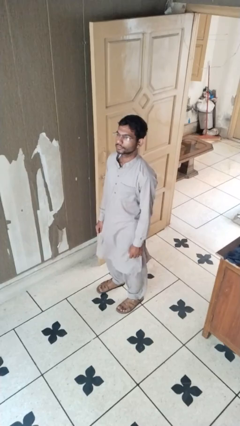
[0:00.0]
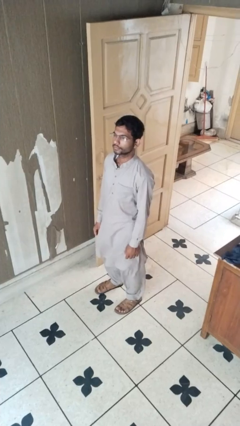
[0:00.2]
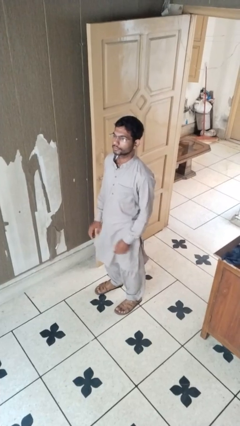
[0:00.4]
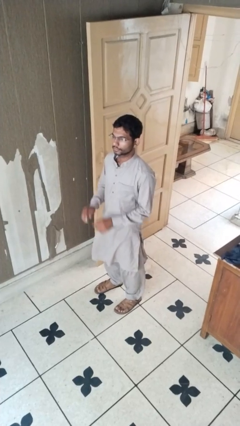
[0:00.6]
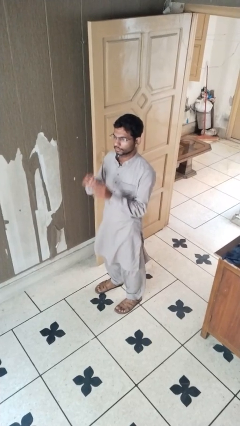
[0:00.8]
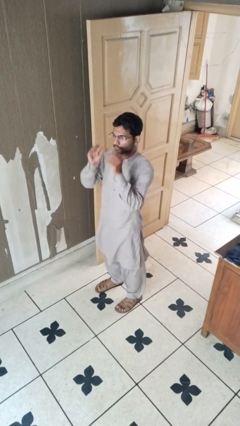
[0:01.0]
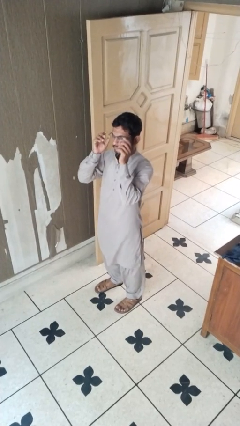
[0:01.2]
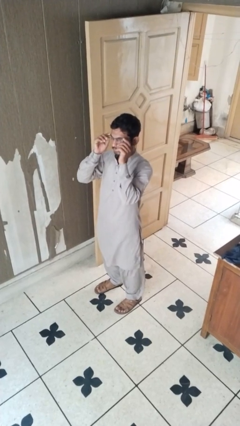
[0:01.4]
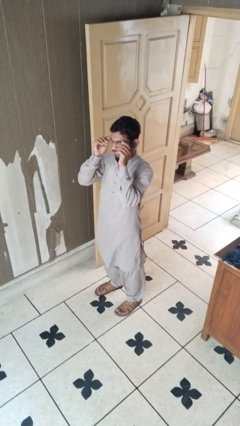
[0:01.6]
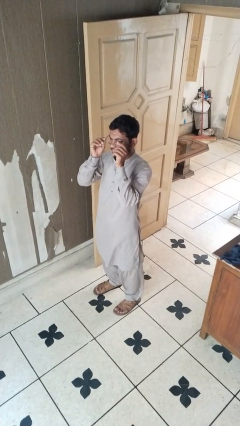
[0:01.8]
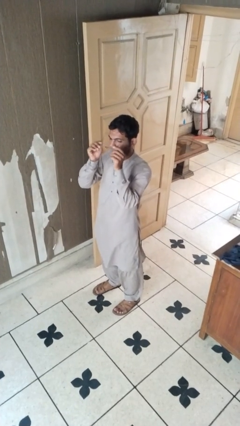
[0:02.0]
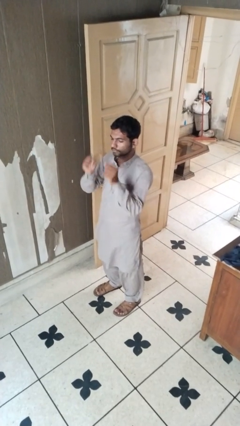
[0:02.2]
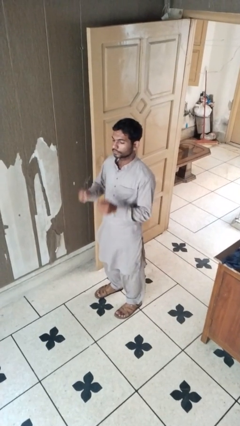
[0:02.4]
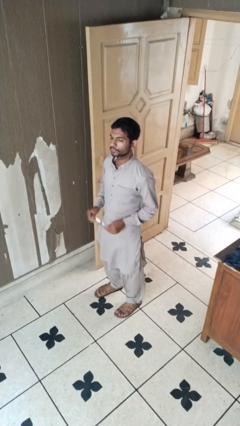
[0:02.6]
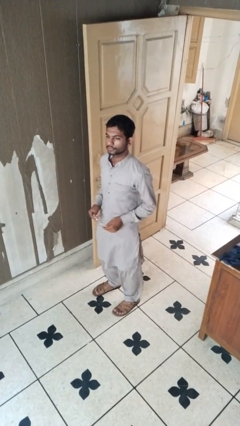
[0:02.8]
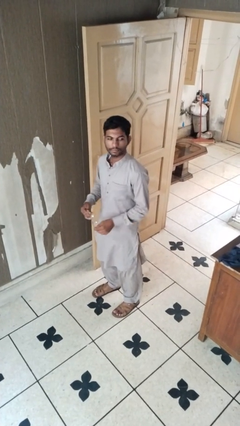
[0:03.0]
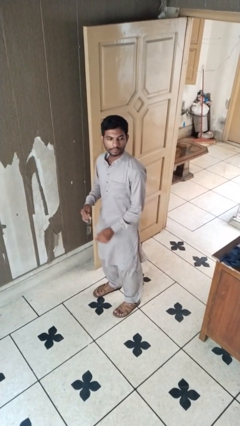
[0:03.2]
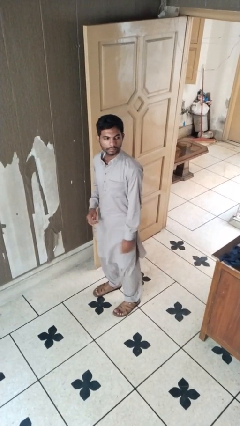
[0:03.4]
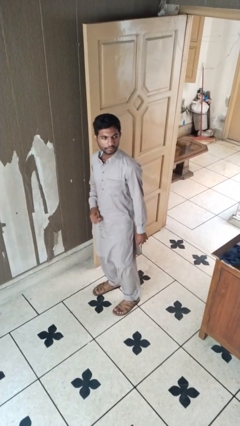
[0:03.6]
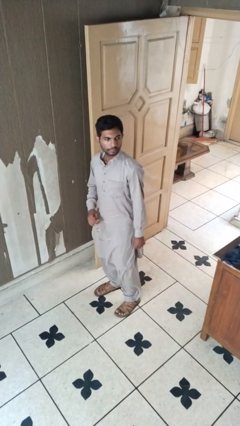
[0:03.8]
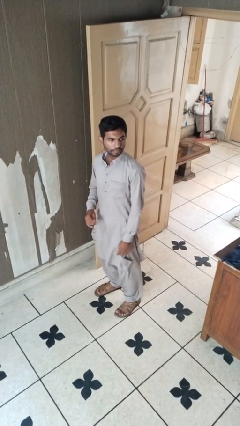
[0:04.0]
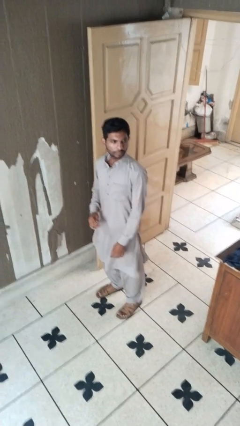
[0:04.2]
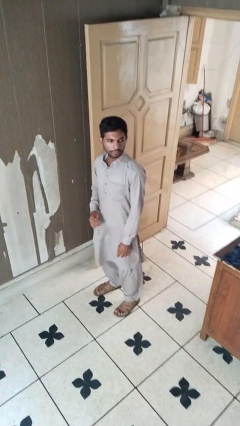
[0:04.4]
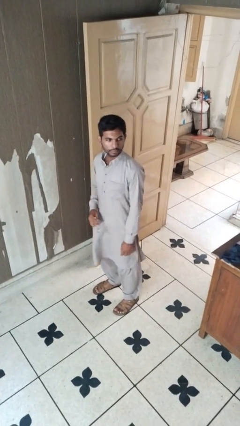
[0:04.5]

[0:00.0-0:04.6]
person takes off glasses

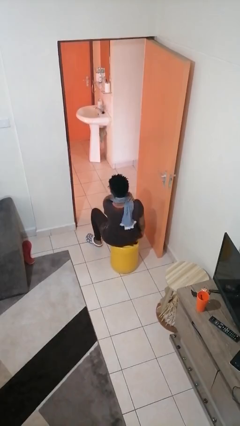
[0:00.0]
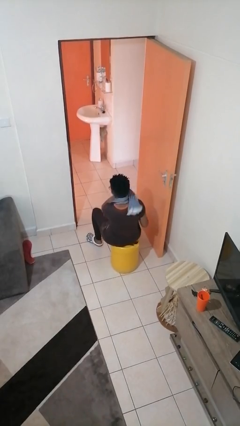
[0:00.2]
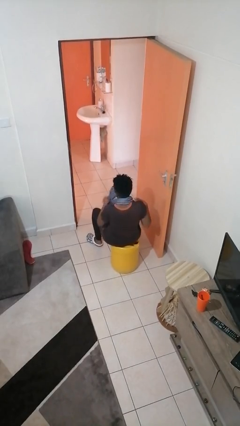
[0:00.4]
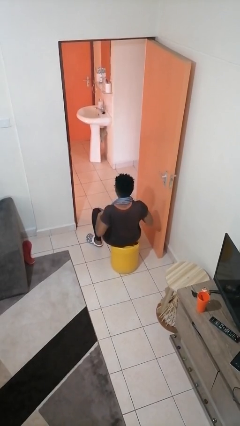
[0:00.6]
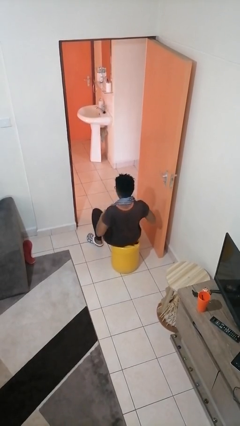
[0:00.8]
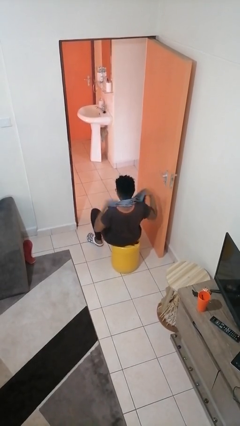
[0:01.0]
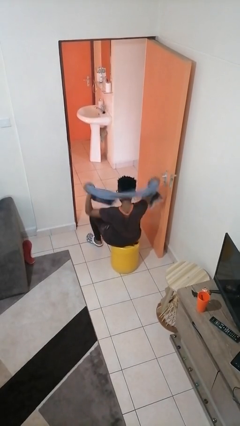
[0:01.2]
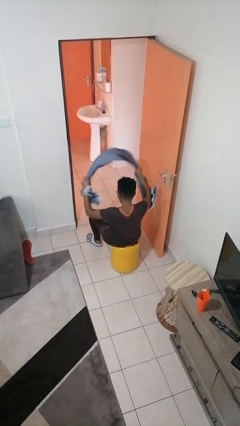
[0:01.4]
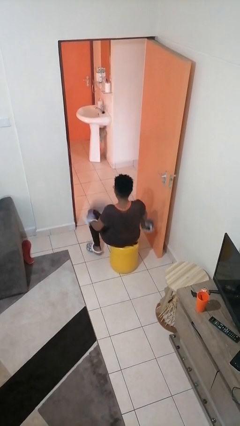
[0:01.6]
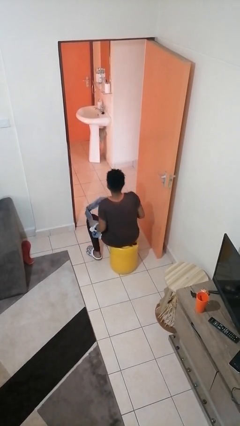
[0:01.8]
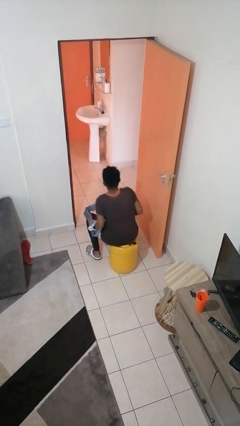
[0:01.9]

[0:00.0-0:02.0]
person takes off scarf

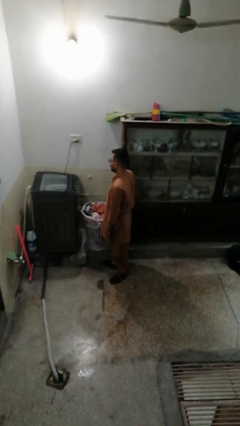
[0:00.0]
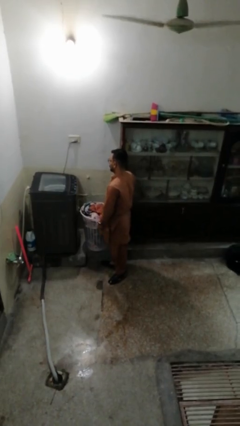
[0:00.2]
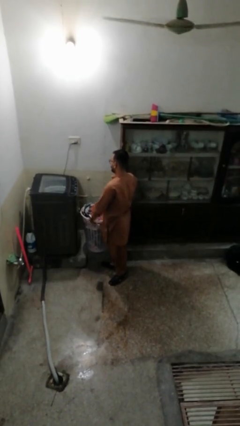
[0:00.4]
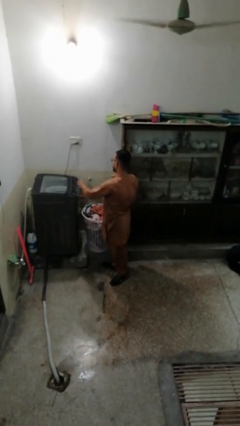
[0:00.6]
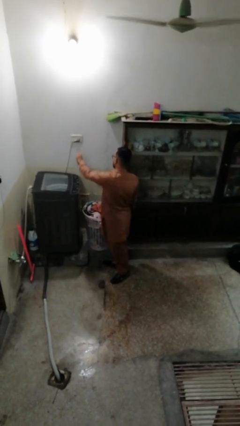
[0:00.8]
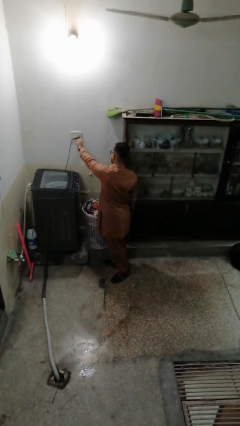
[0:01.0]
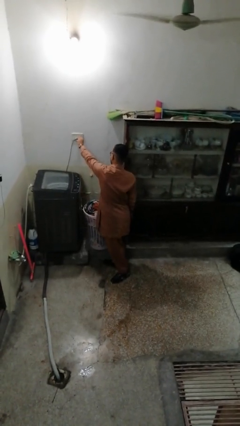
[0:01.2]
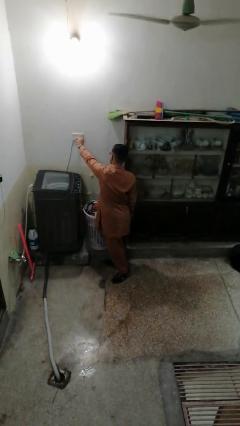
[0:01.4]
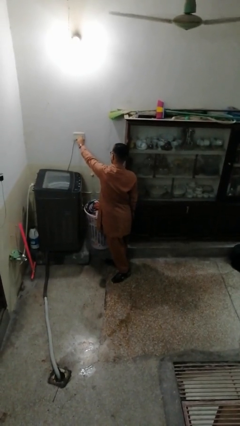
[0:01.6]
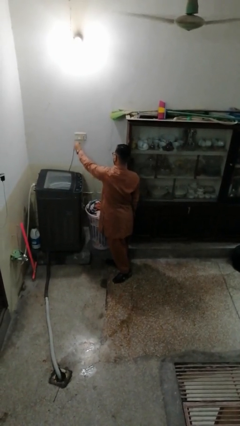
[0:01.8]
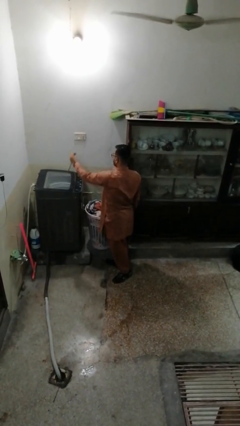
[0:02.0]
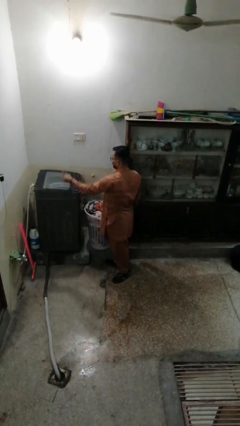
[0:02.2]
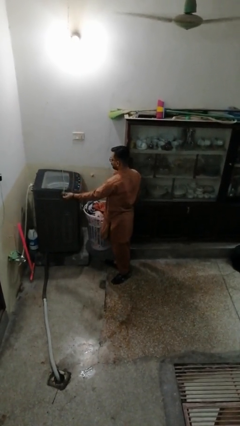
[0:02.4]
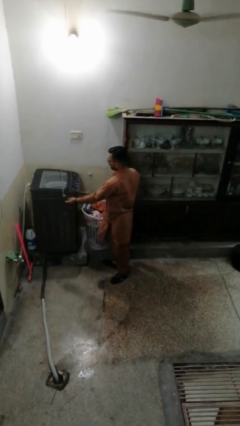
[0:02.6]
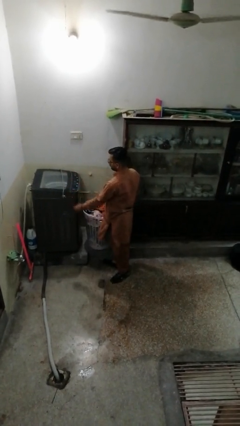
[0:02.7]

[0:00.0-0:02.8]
person unplugs from electrical socket

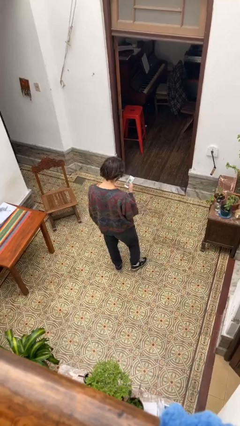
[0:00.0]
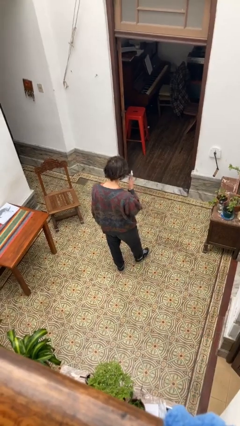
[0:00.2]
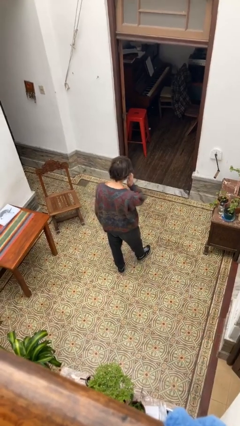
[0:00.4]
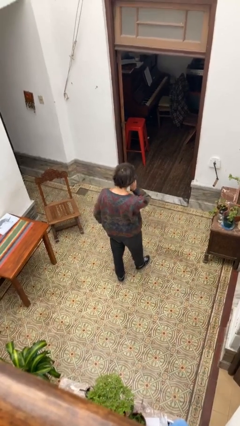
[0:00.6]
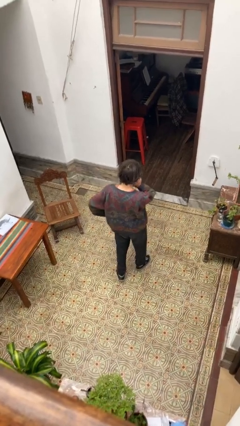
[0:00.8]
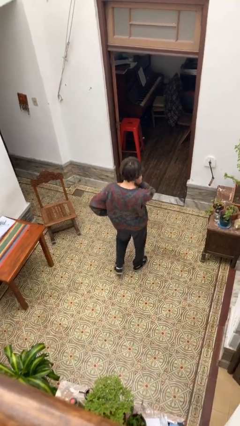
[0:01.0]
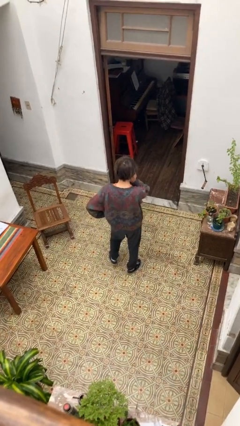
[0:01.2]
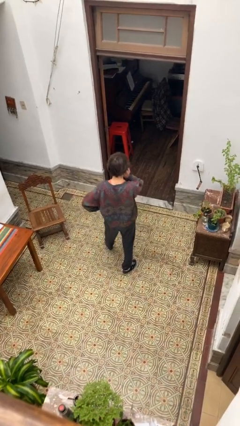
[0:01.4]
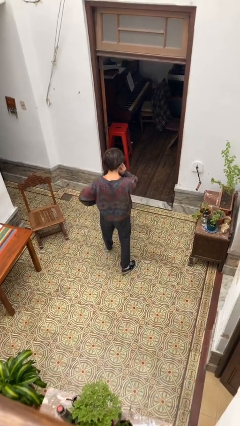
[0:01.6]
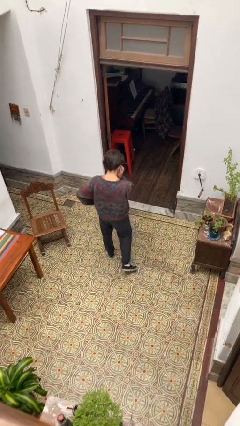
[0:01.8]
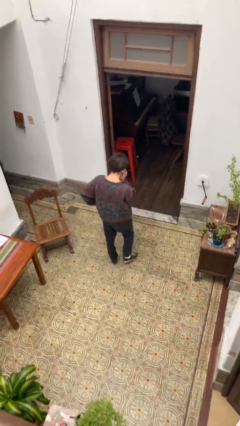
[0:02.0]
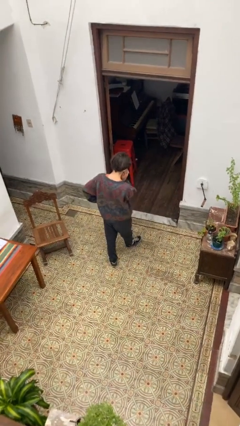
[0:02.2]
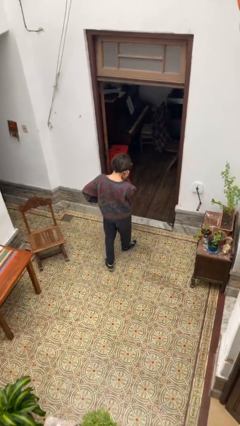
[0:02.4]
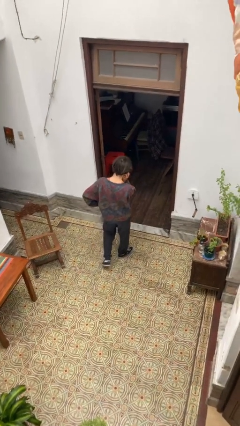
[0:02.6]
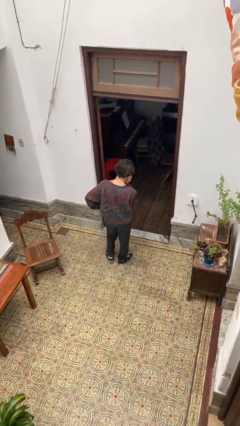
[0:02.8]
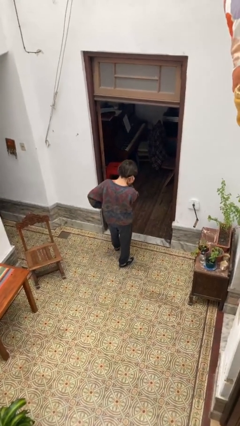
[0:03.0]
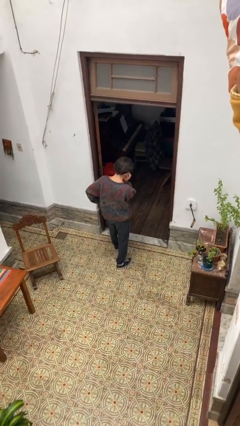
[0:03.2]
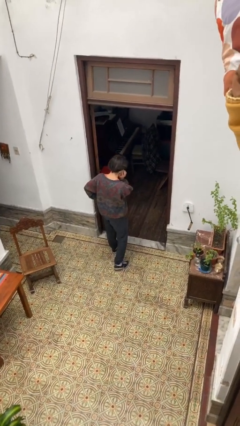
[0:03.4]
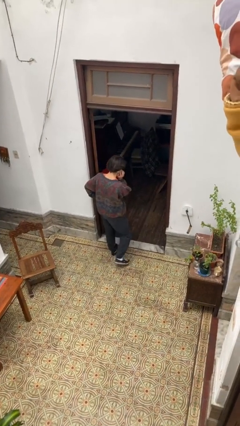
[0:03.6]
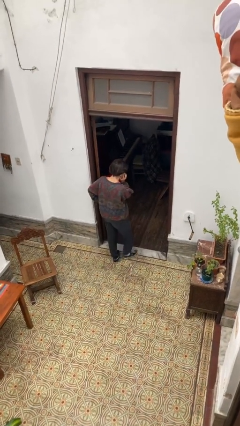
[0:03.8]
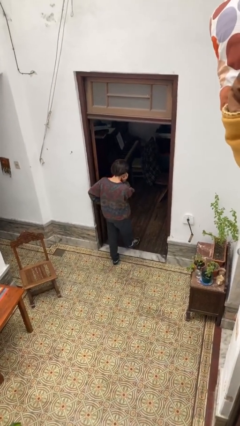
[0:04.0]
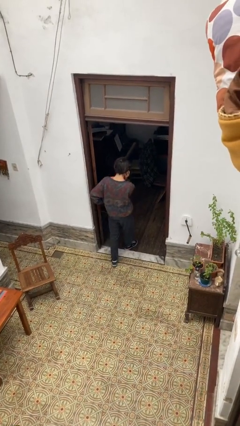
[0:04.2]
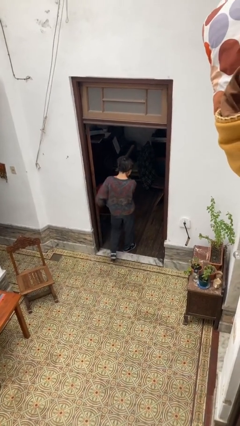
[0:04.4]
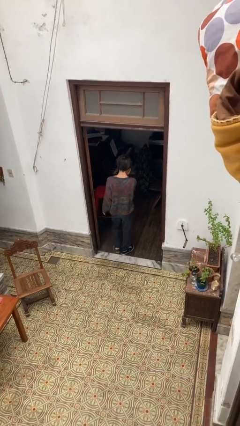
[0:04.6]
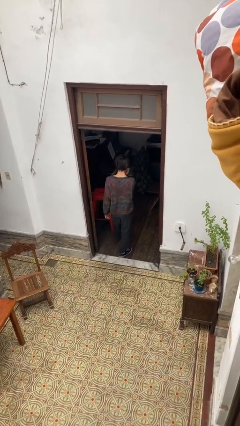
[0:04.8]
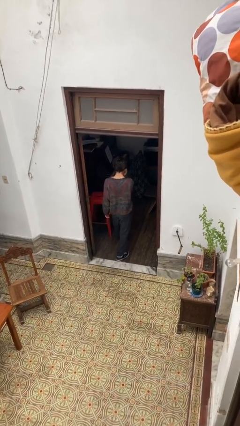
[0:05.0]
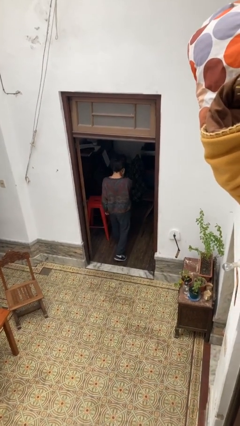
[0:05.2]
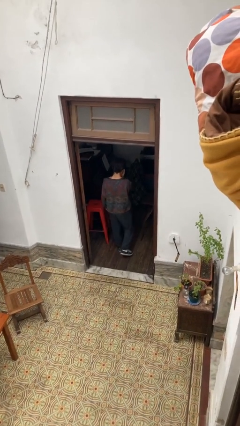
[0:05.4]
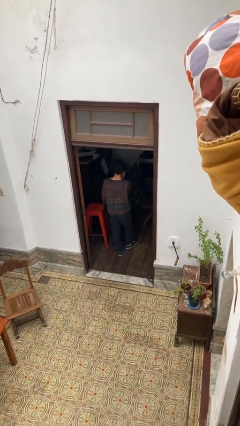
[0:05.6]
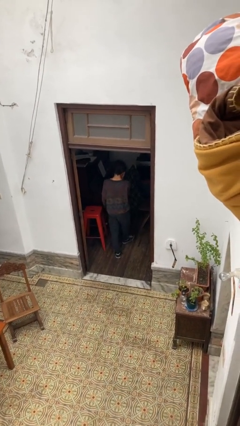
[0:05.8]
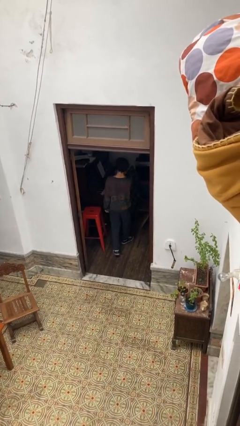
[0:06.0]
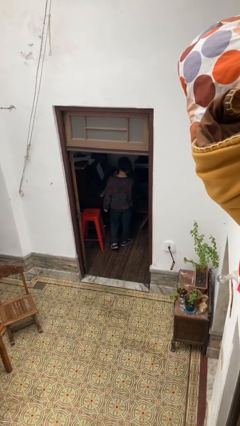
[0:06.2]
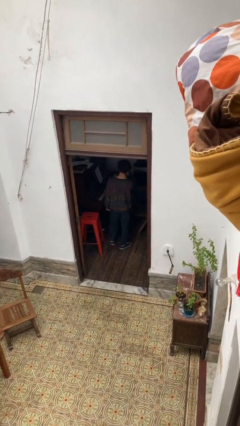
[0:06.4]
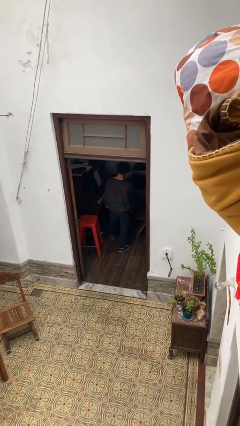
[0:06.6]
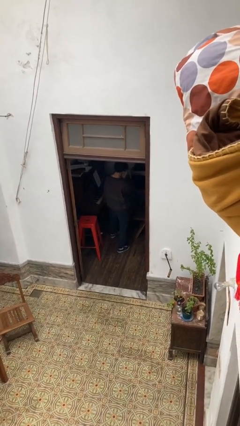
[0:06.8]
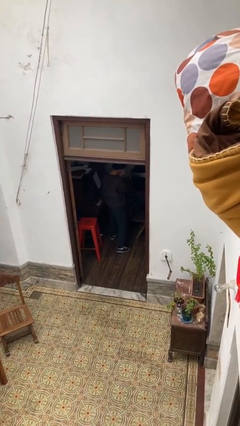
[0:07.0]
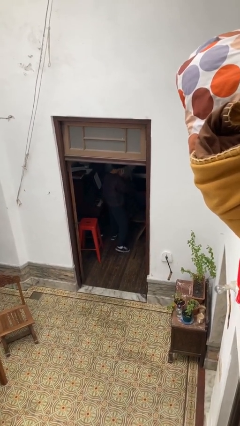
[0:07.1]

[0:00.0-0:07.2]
person exits scene through structure

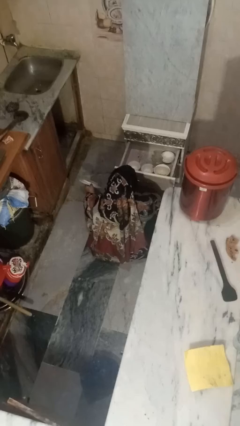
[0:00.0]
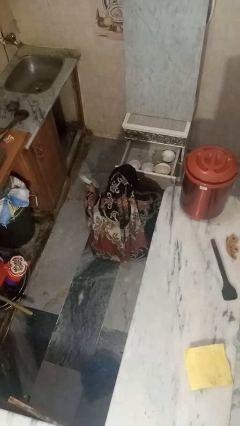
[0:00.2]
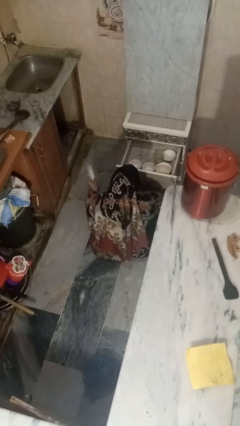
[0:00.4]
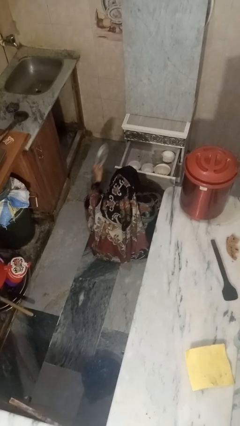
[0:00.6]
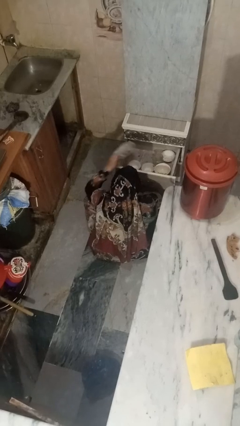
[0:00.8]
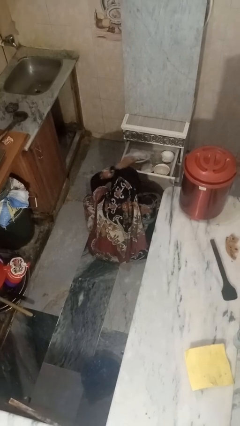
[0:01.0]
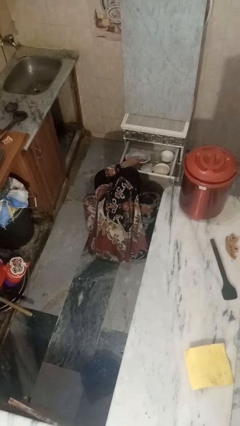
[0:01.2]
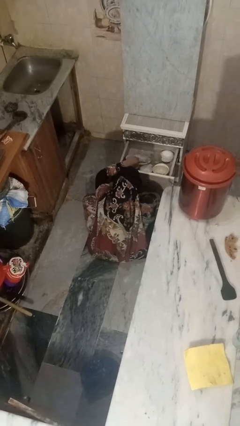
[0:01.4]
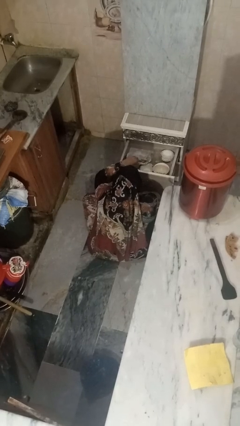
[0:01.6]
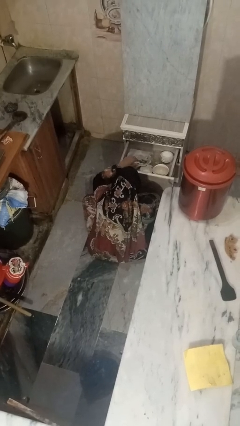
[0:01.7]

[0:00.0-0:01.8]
person puts object into kitchen drawer
